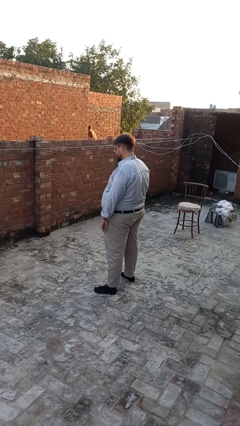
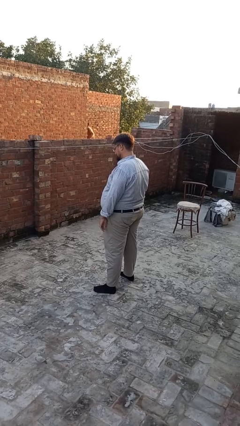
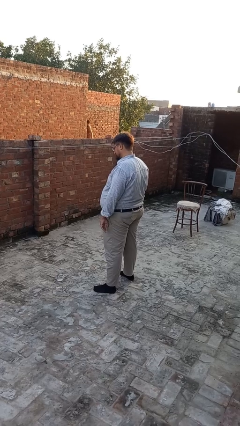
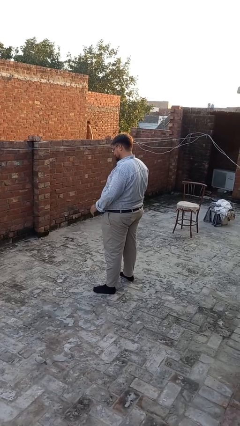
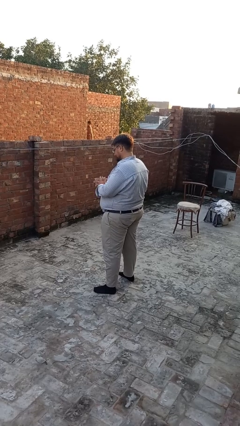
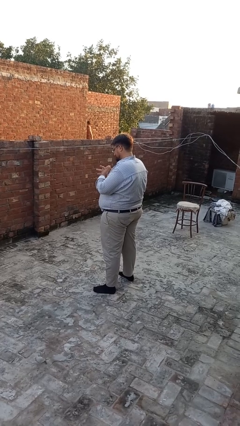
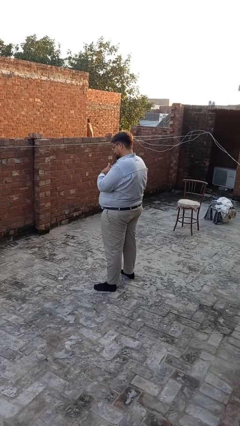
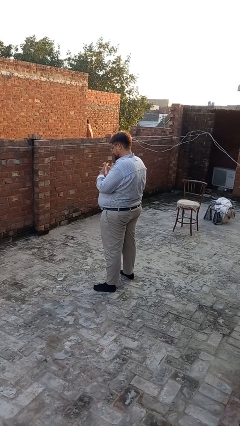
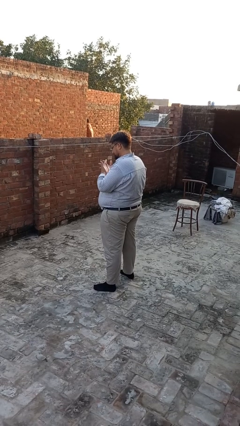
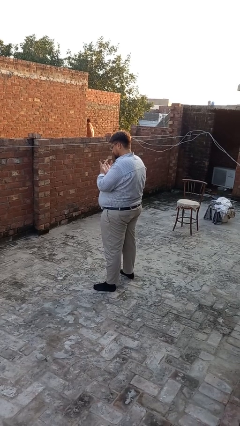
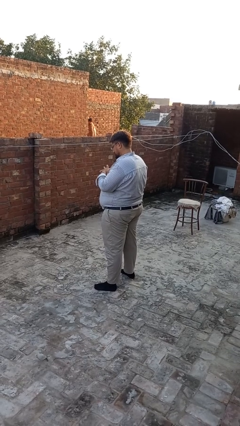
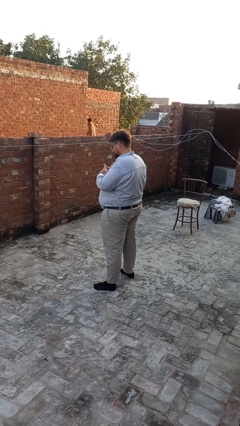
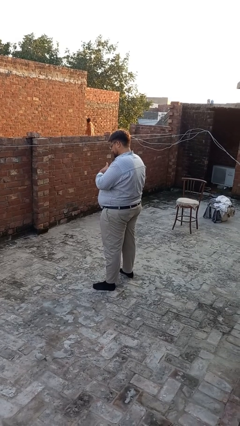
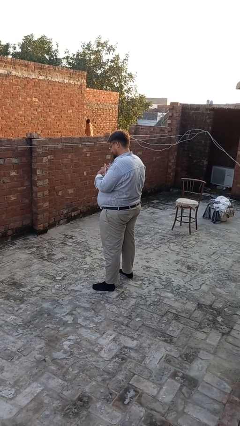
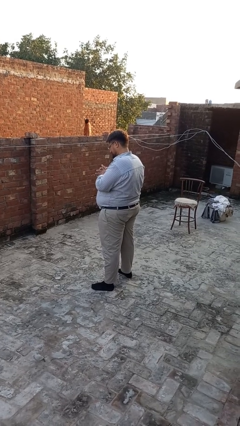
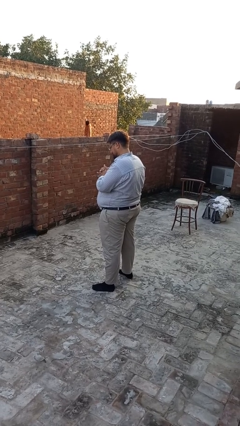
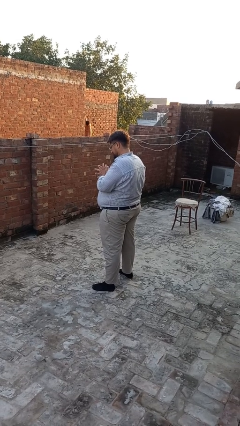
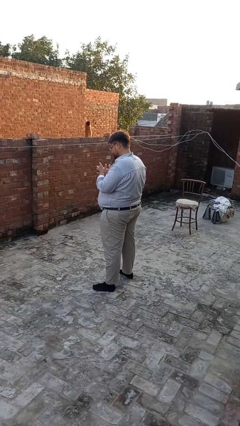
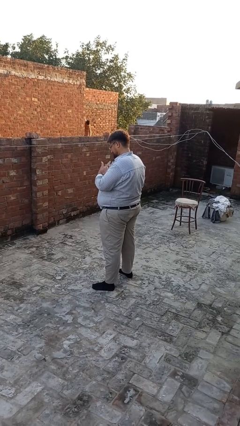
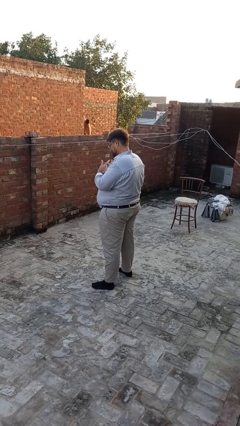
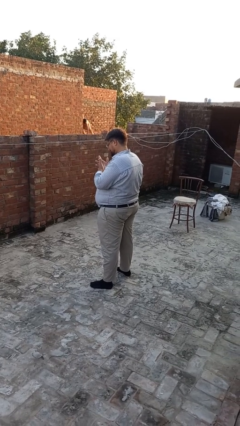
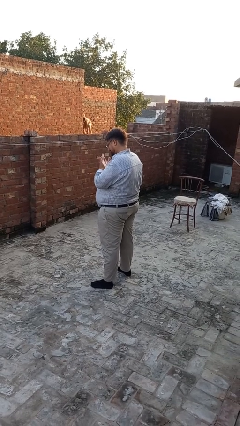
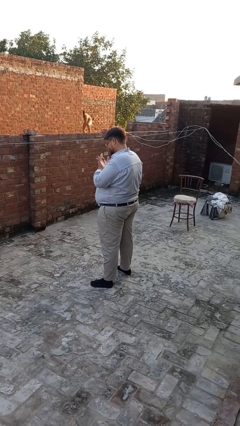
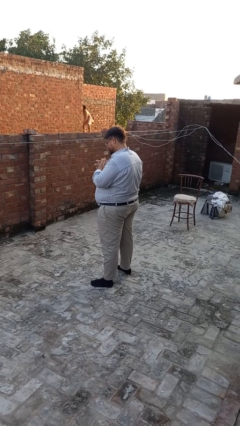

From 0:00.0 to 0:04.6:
person cracks knuckles

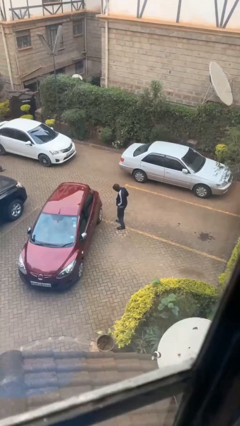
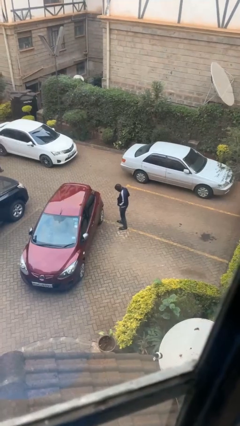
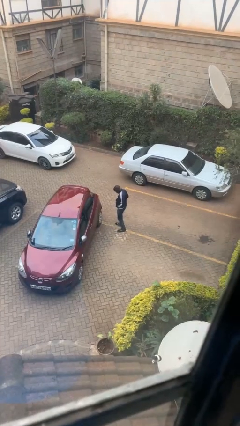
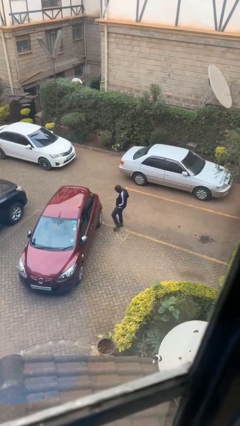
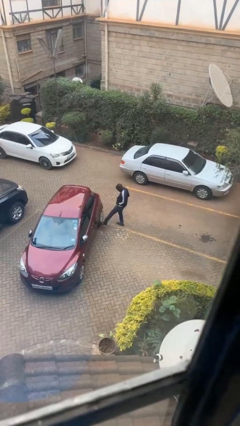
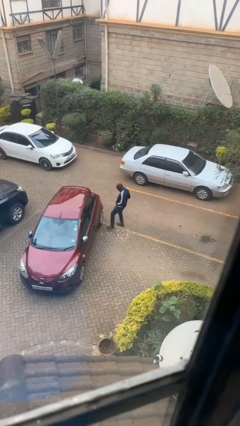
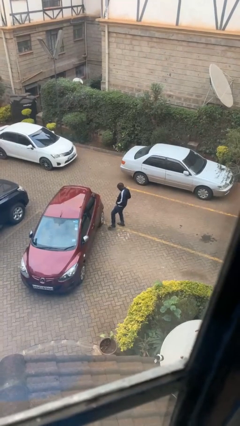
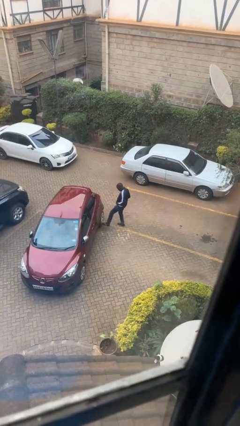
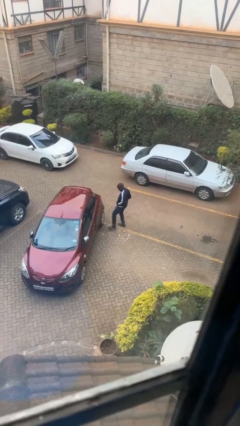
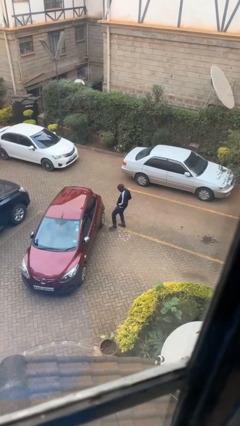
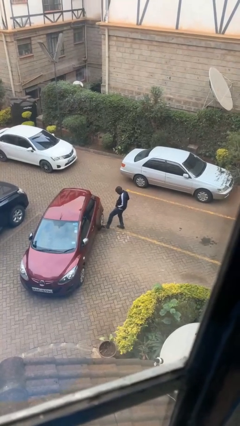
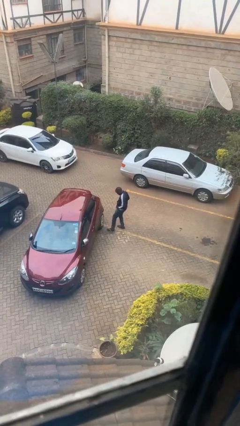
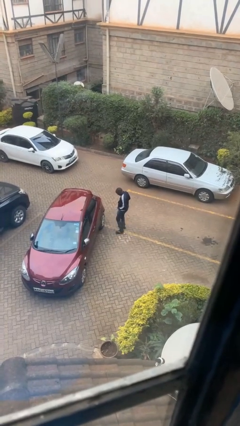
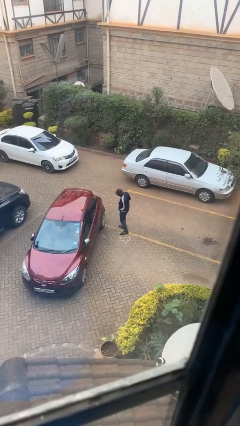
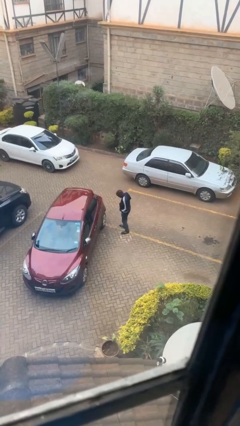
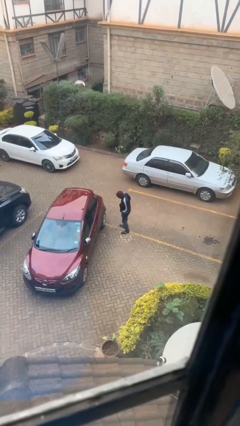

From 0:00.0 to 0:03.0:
person kicks car tires

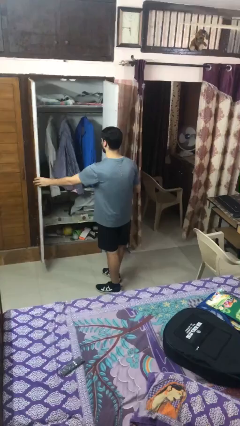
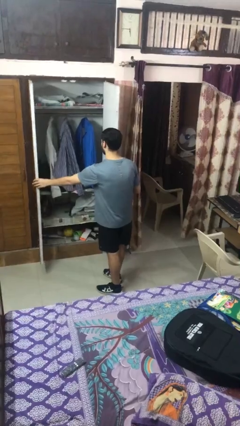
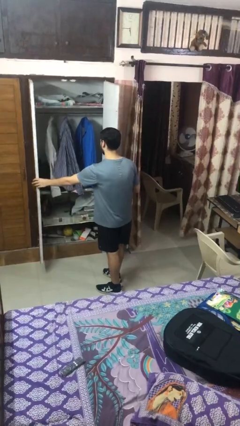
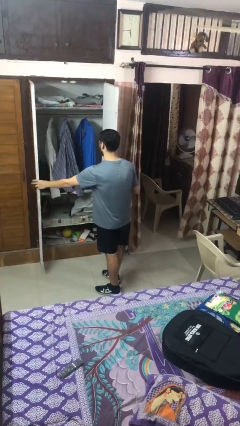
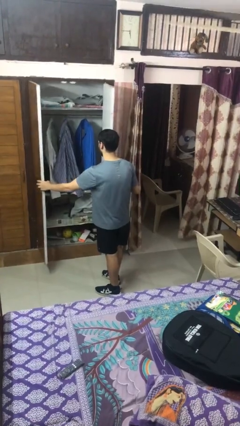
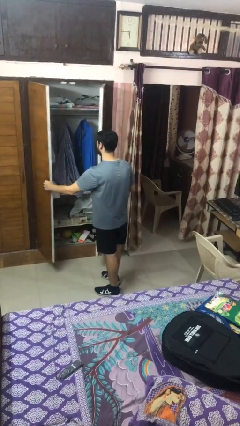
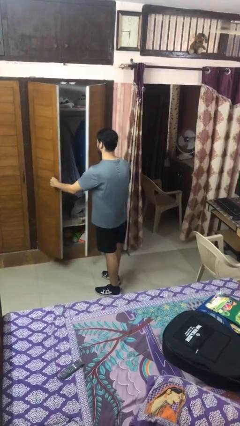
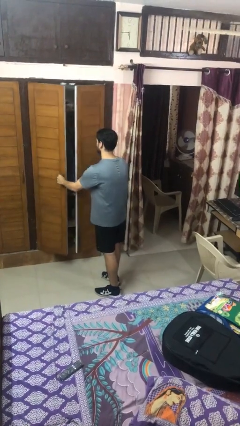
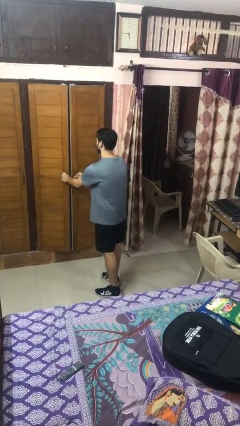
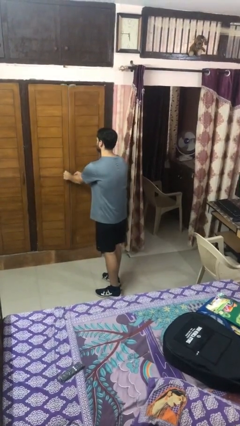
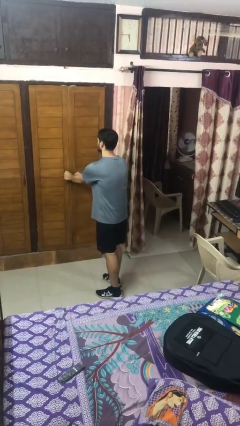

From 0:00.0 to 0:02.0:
person closes closet door

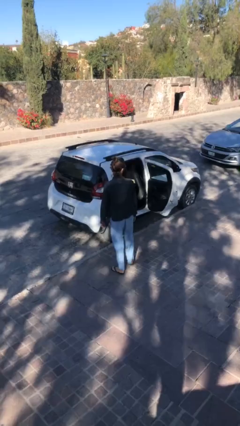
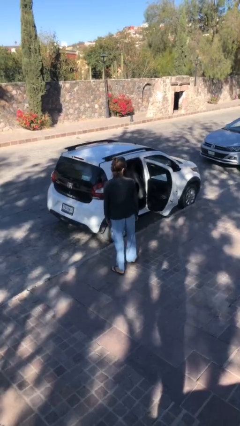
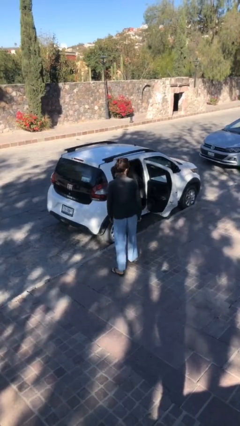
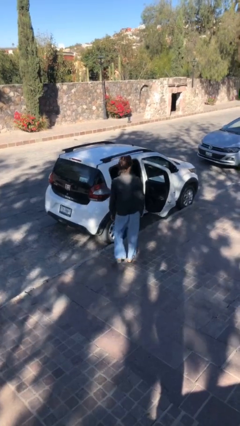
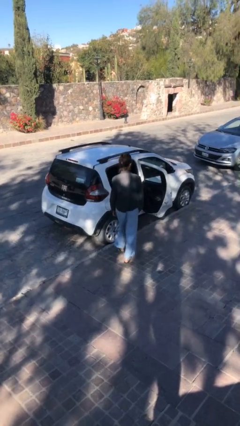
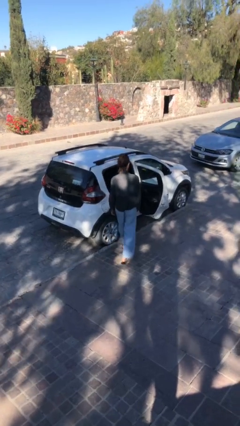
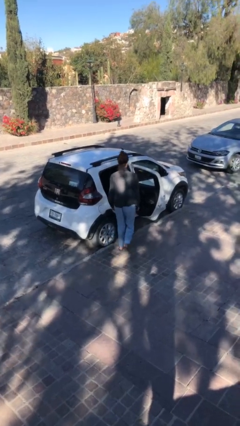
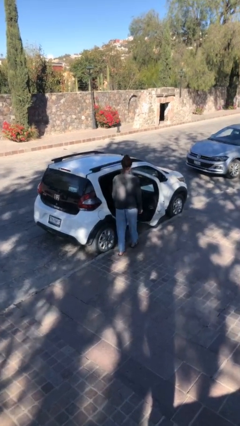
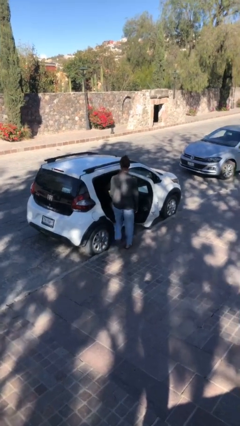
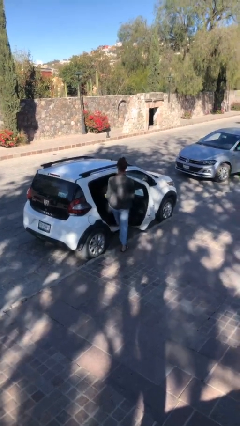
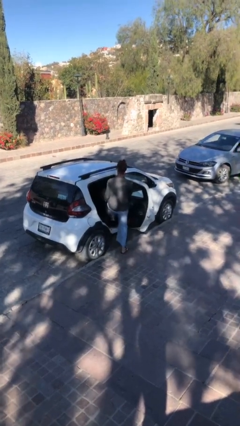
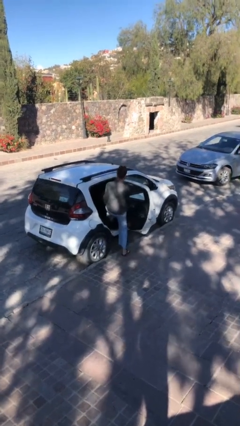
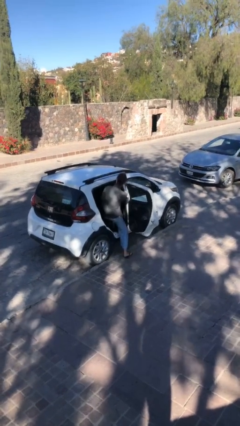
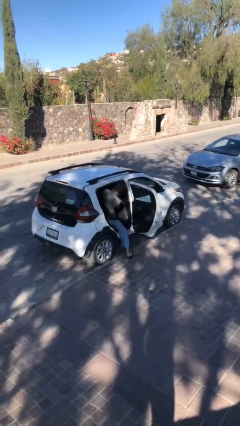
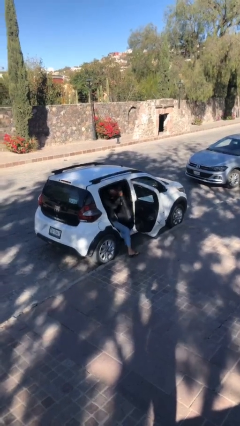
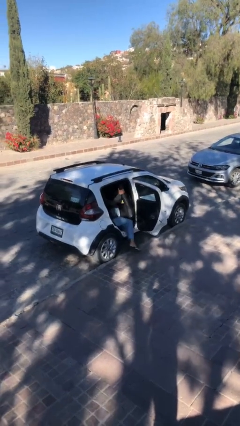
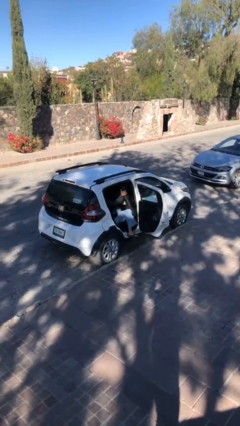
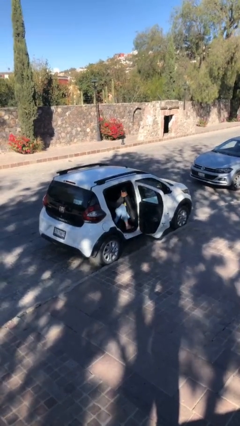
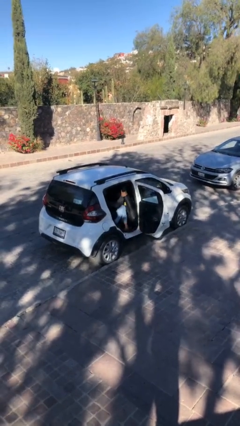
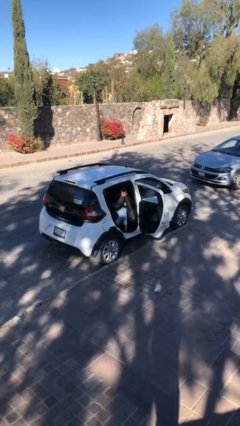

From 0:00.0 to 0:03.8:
person enters car

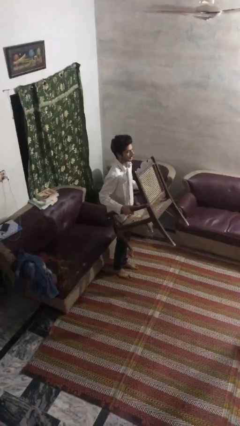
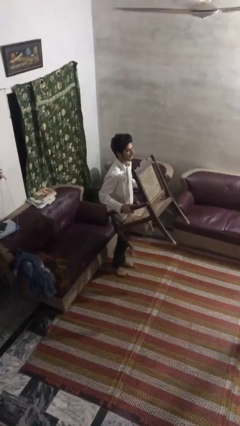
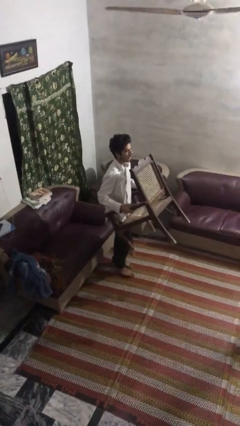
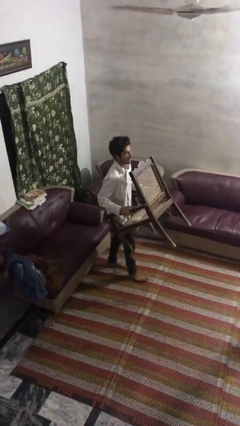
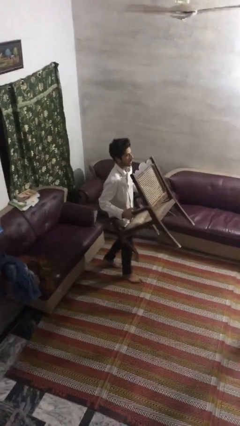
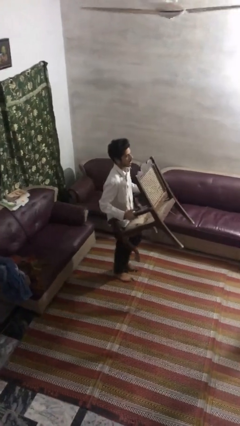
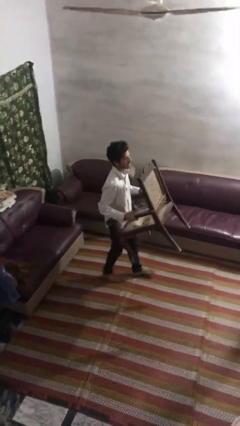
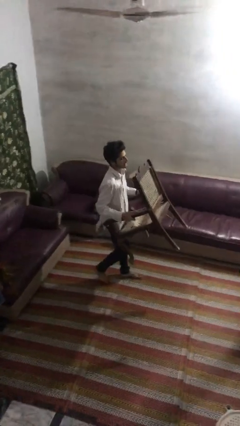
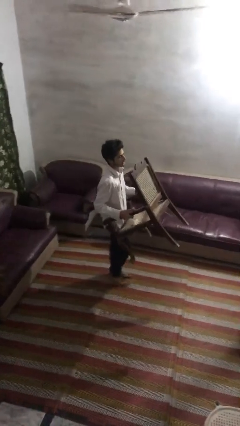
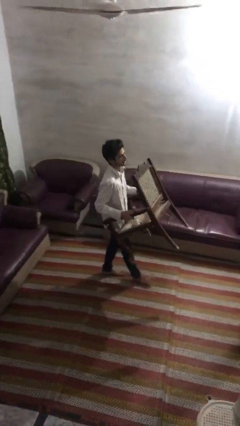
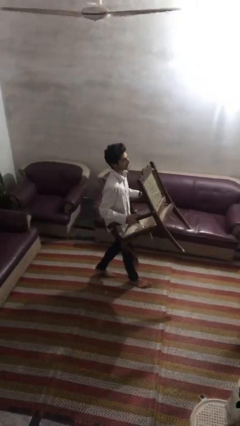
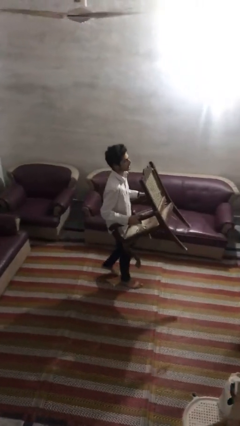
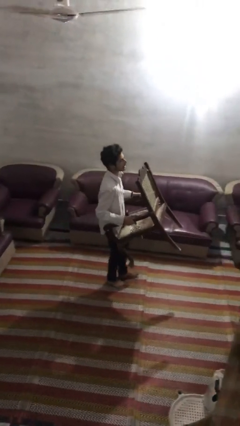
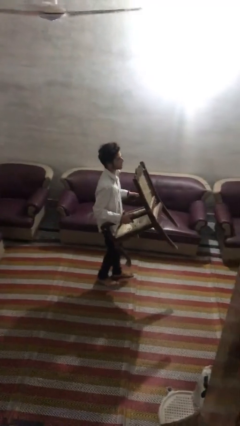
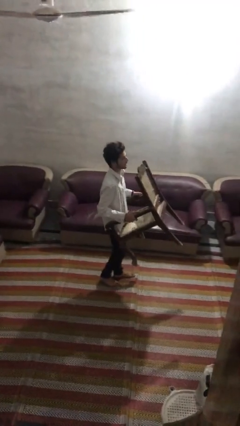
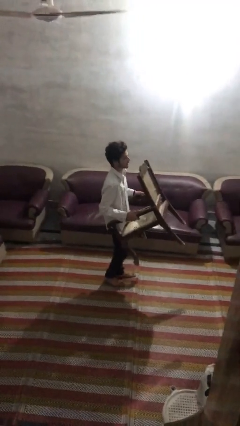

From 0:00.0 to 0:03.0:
person carries furniture

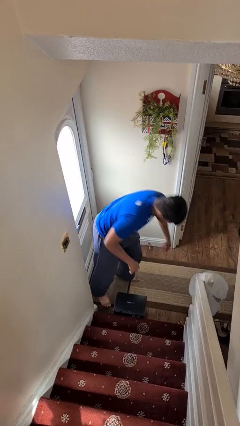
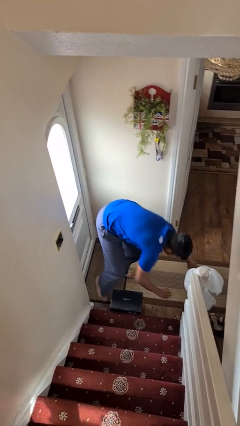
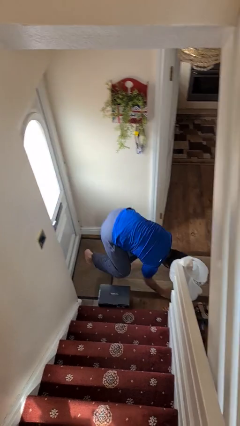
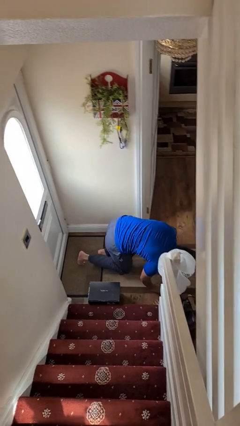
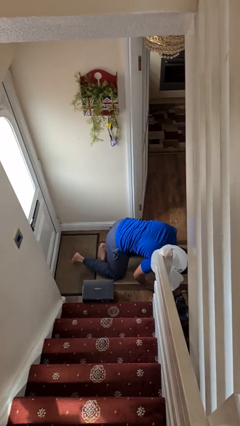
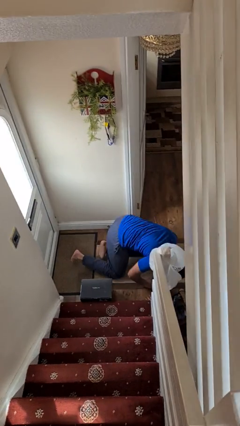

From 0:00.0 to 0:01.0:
person trips on object on floor

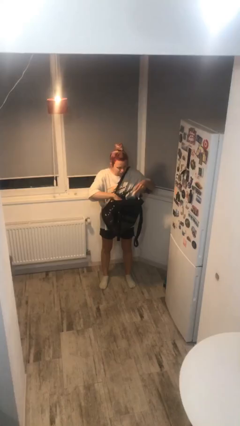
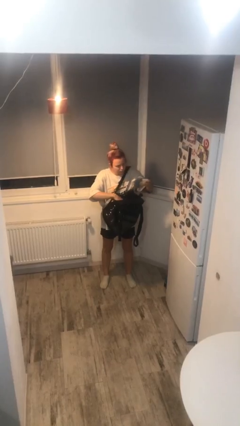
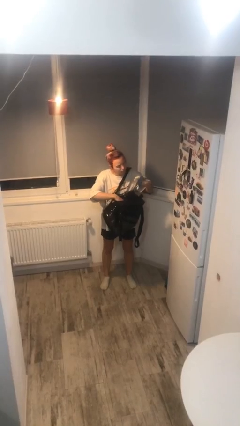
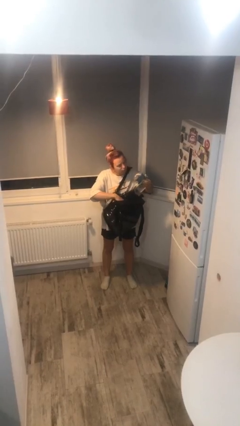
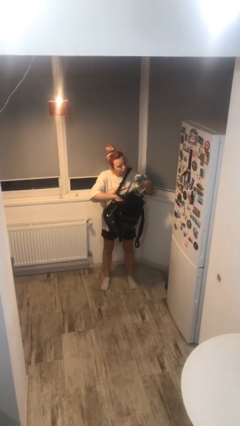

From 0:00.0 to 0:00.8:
person takes object from backpack
